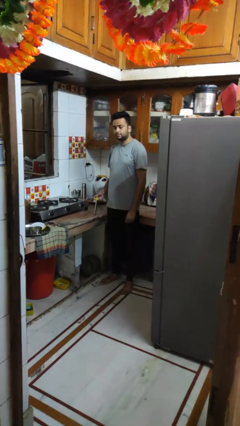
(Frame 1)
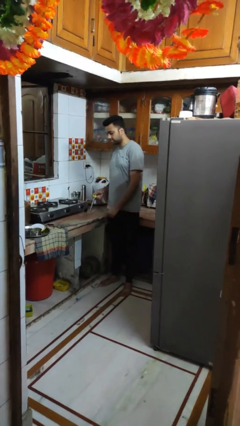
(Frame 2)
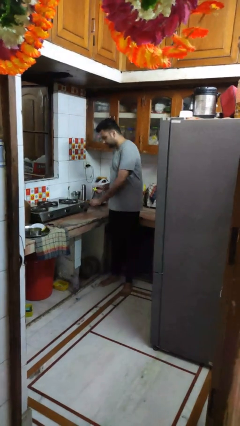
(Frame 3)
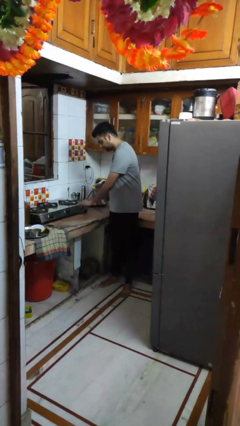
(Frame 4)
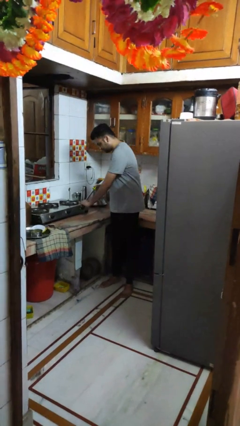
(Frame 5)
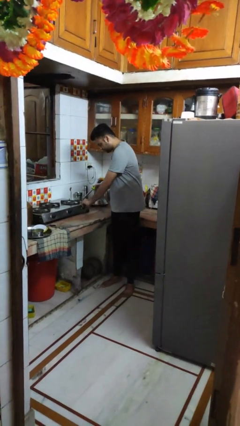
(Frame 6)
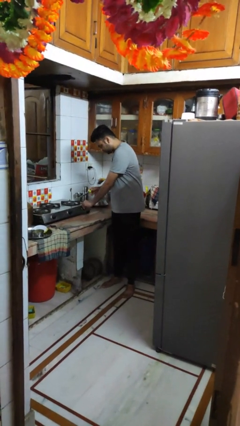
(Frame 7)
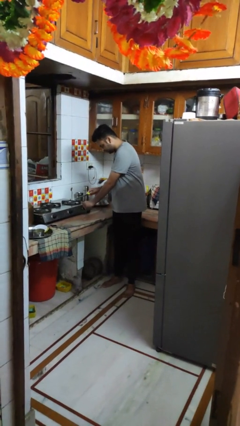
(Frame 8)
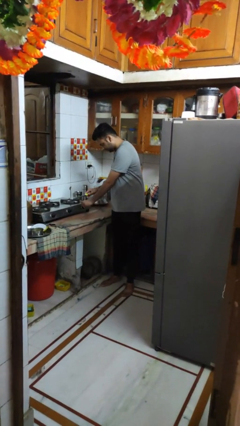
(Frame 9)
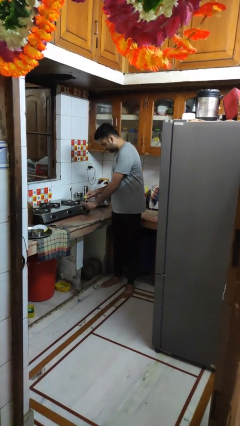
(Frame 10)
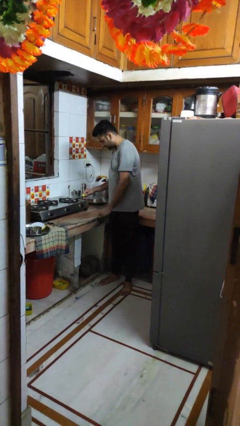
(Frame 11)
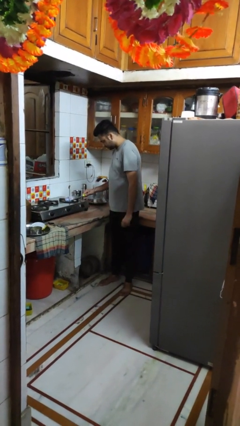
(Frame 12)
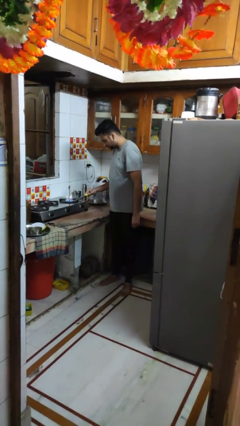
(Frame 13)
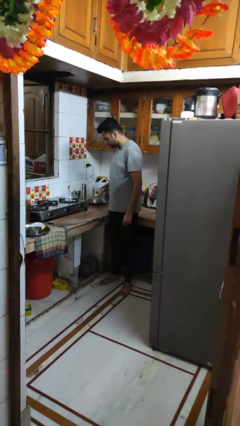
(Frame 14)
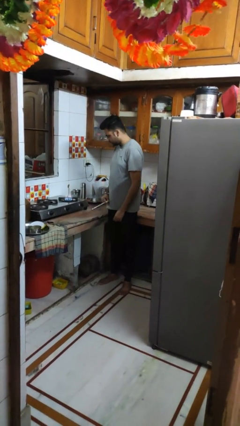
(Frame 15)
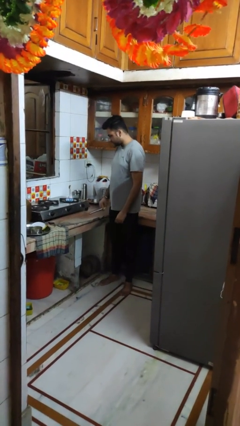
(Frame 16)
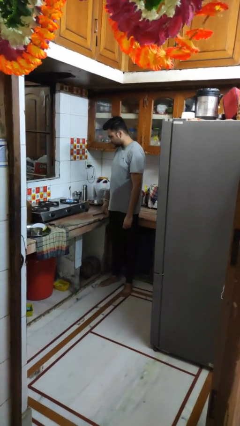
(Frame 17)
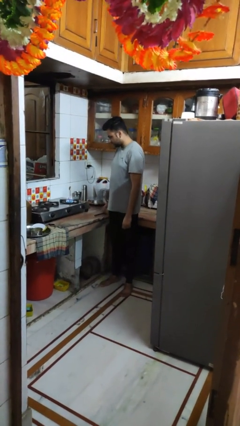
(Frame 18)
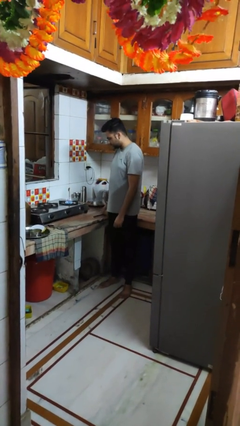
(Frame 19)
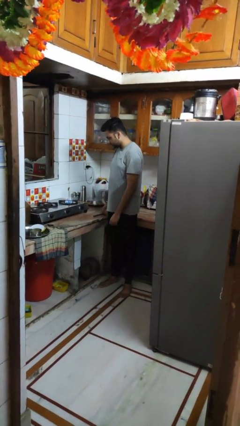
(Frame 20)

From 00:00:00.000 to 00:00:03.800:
person turns on stovetop

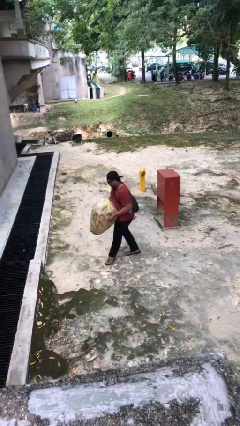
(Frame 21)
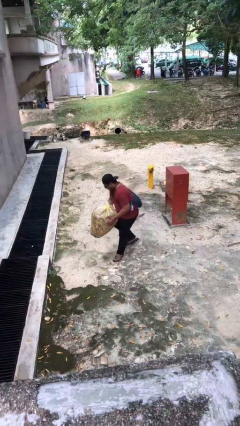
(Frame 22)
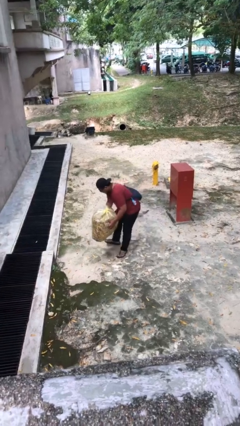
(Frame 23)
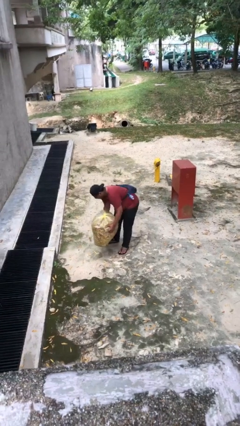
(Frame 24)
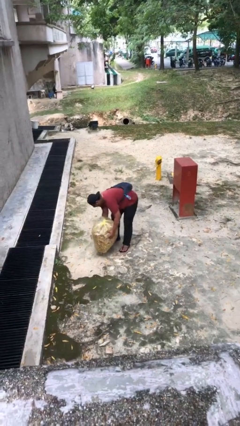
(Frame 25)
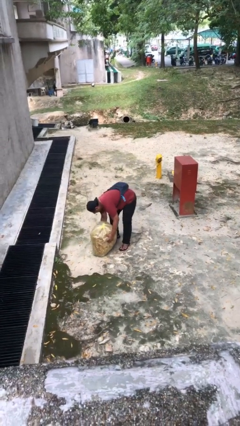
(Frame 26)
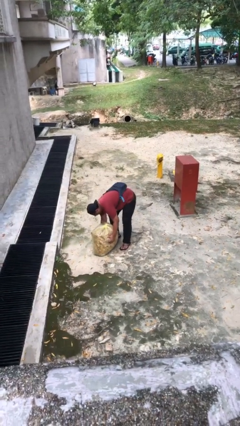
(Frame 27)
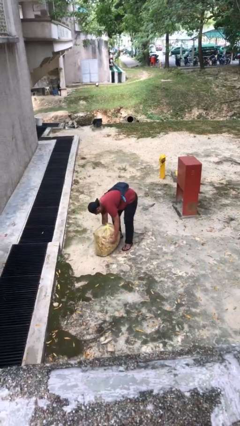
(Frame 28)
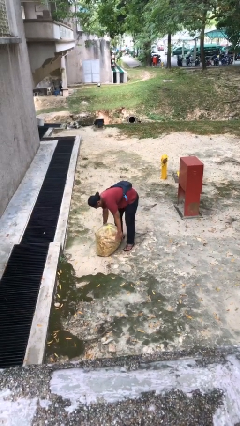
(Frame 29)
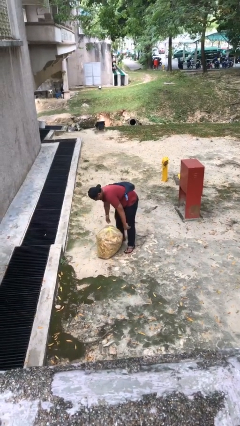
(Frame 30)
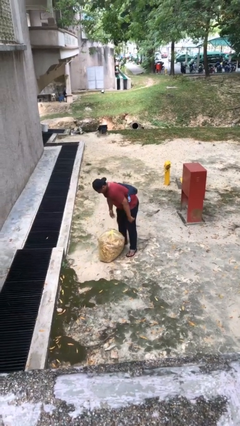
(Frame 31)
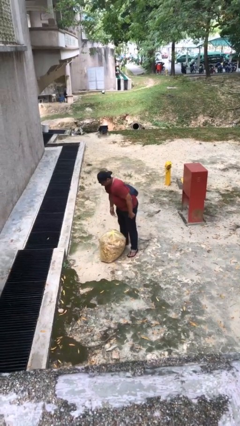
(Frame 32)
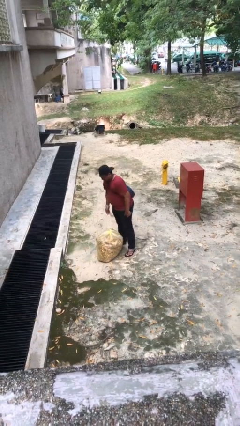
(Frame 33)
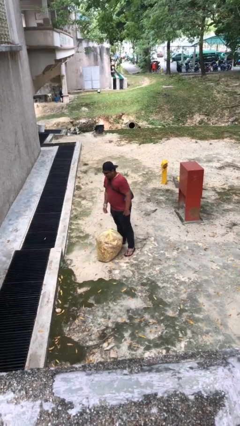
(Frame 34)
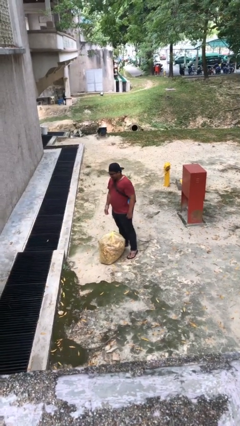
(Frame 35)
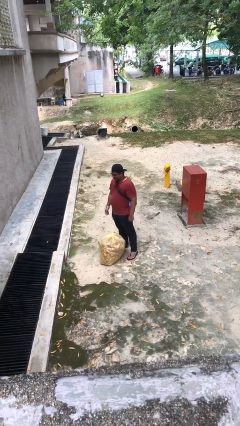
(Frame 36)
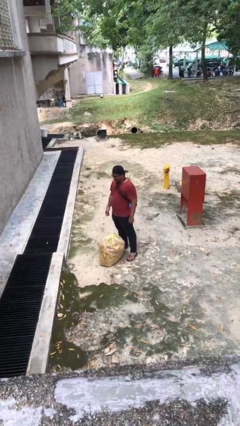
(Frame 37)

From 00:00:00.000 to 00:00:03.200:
person puts down object on floor

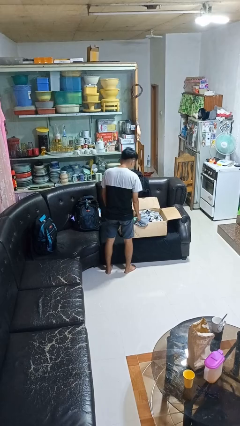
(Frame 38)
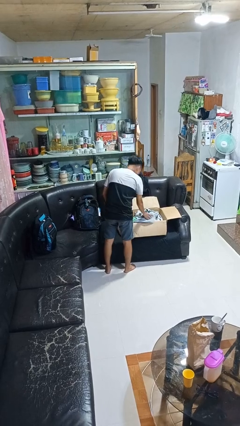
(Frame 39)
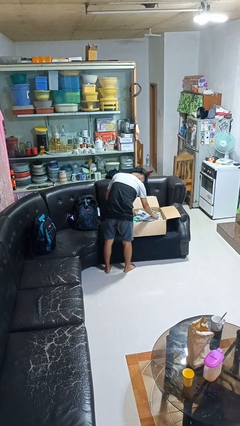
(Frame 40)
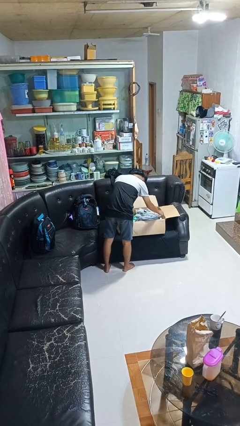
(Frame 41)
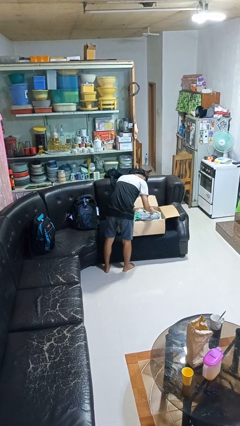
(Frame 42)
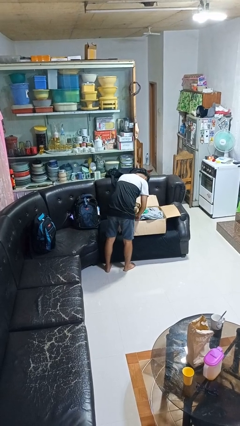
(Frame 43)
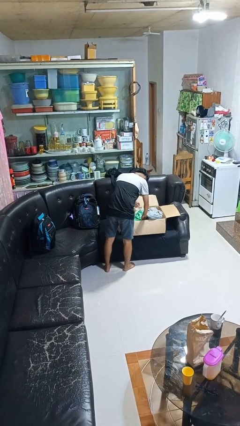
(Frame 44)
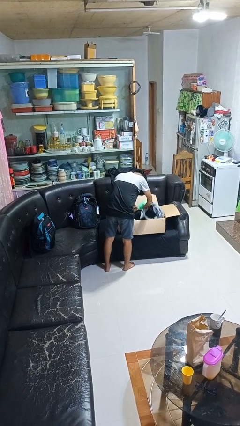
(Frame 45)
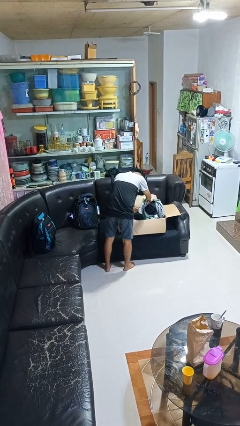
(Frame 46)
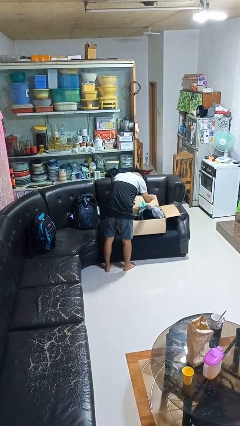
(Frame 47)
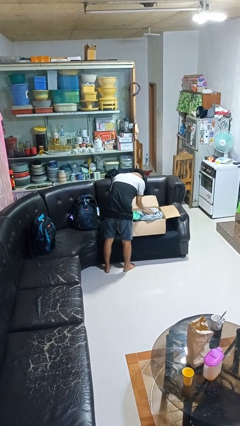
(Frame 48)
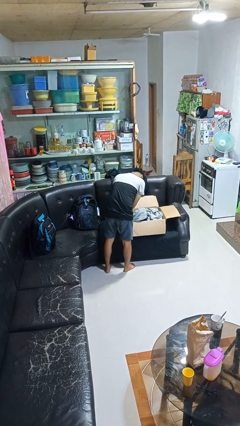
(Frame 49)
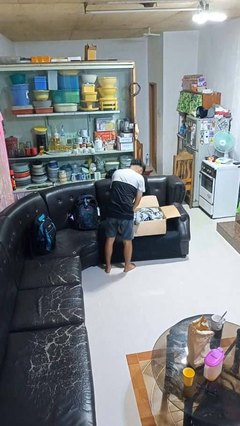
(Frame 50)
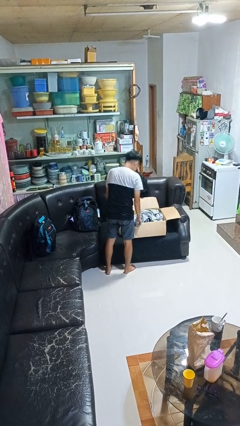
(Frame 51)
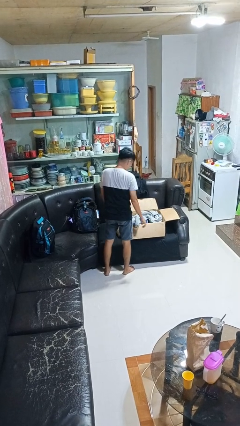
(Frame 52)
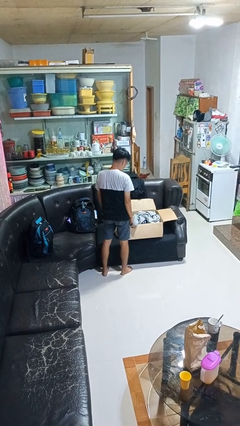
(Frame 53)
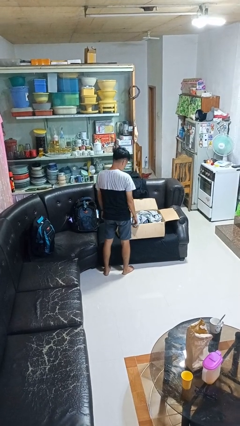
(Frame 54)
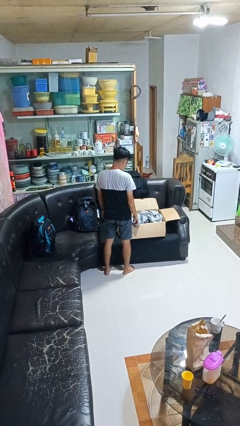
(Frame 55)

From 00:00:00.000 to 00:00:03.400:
person searches in box

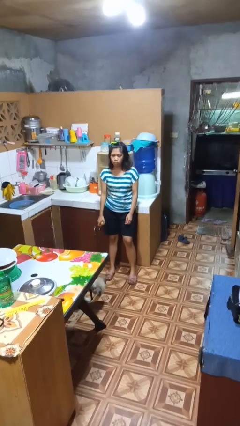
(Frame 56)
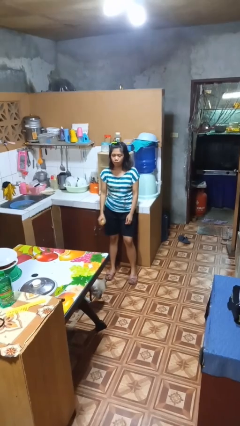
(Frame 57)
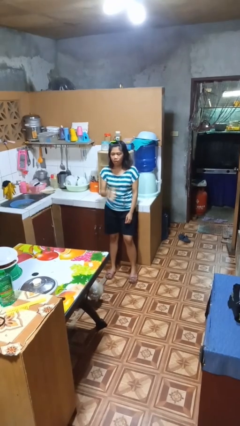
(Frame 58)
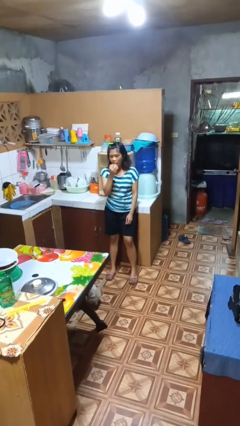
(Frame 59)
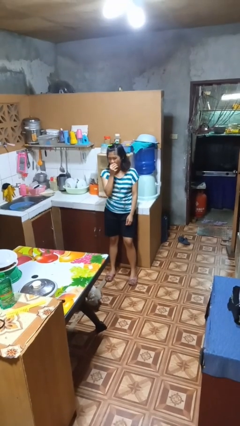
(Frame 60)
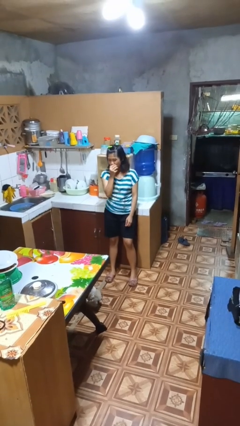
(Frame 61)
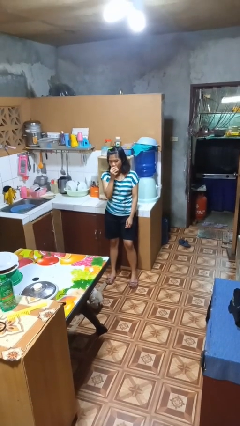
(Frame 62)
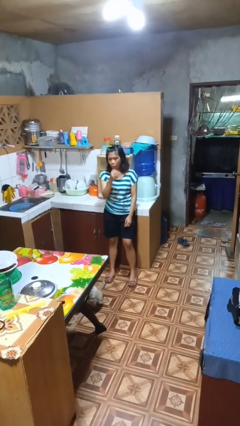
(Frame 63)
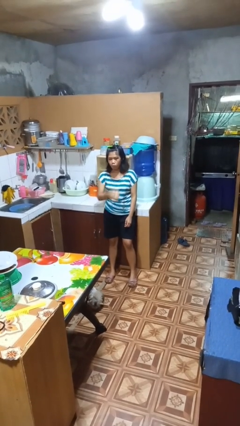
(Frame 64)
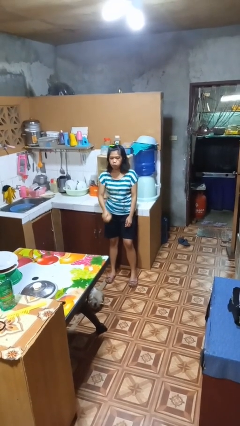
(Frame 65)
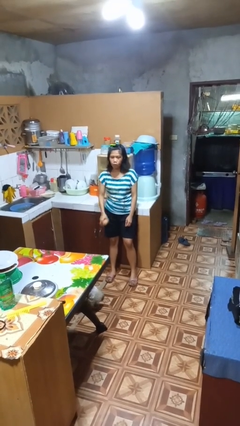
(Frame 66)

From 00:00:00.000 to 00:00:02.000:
person eats apple

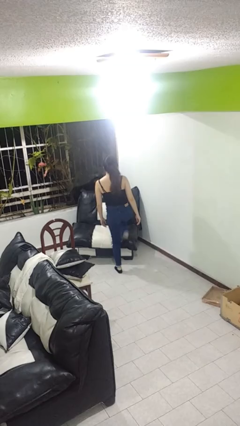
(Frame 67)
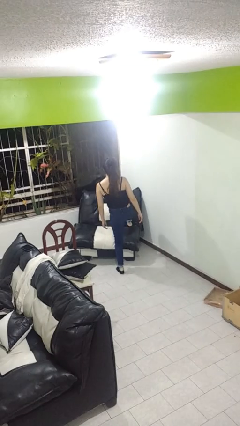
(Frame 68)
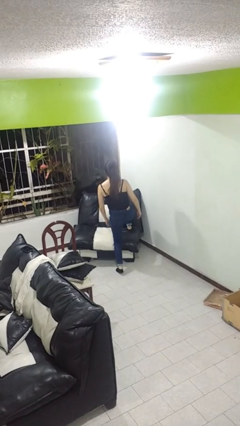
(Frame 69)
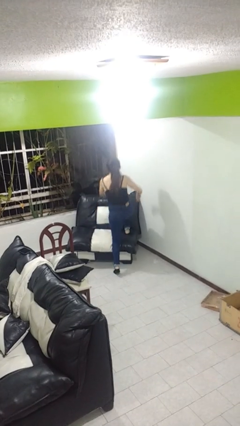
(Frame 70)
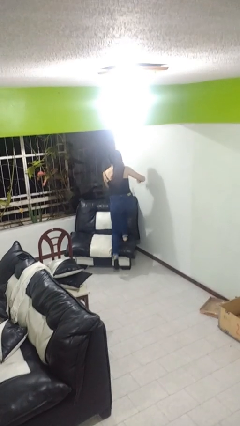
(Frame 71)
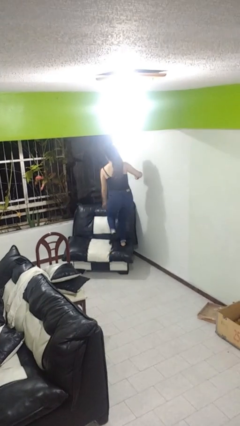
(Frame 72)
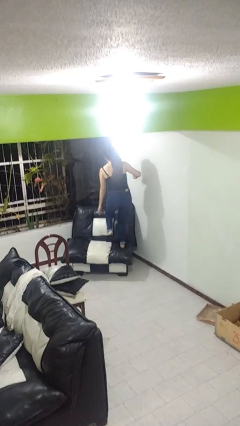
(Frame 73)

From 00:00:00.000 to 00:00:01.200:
person climbs on couch

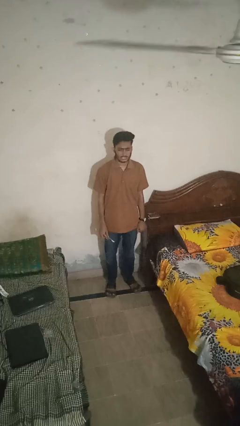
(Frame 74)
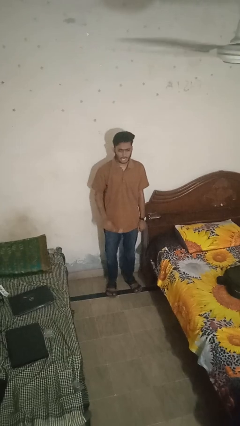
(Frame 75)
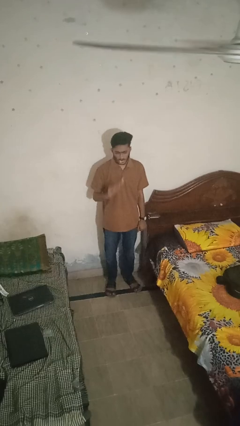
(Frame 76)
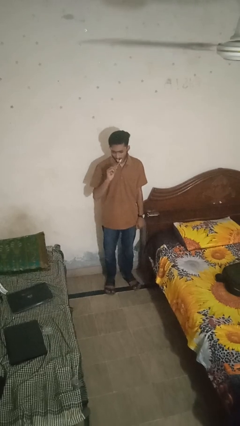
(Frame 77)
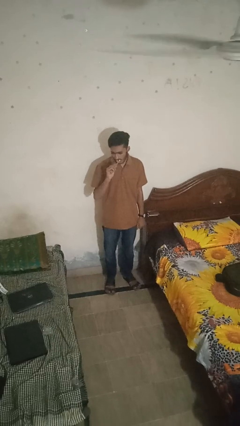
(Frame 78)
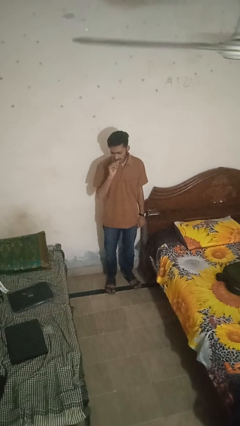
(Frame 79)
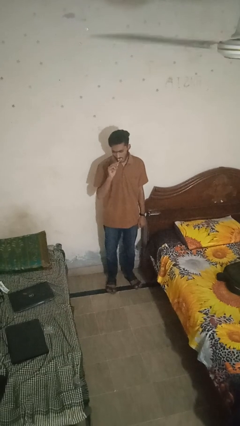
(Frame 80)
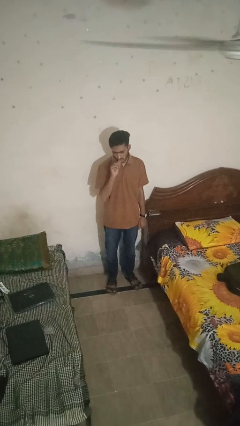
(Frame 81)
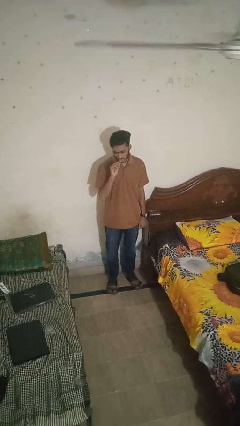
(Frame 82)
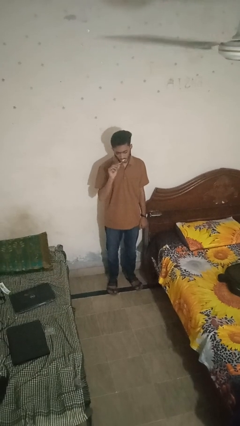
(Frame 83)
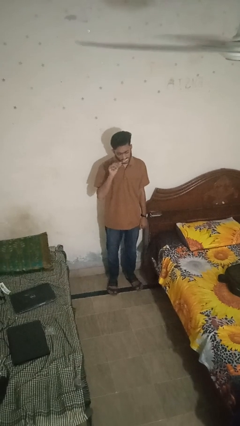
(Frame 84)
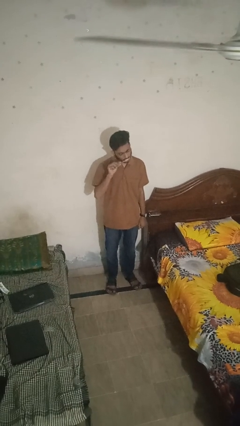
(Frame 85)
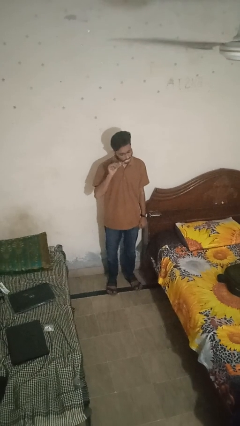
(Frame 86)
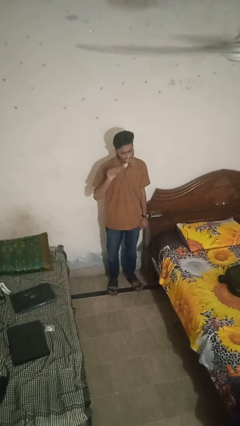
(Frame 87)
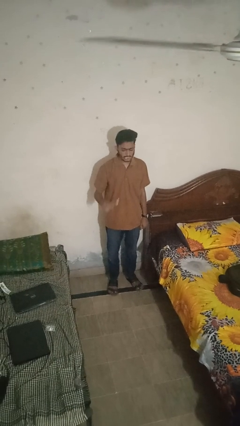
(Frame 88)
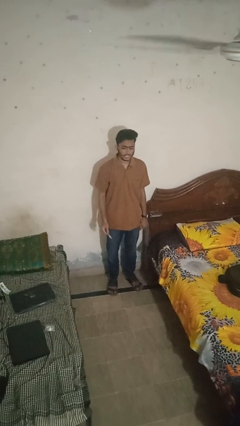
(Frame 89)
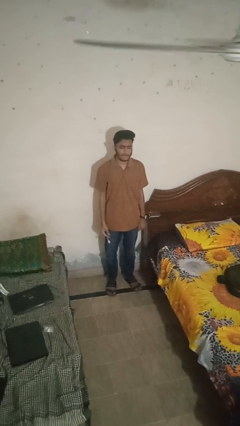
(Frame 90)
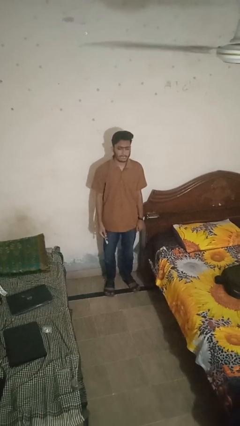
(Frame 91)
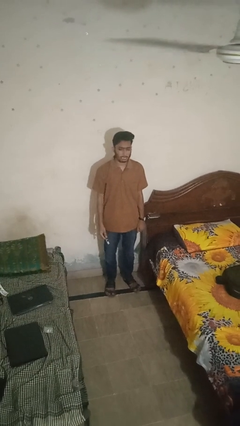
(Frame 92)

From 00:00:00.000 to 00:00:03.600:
person brushes teeth

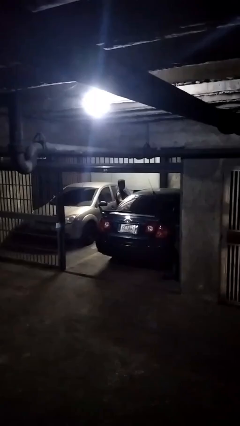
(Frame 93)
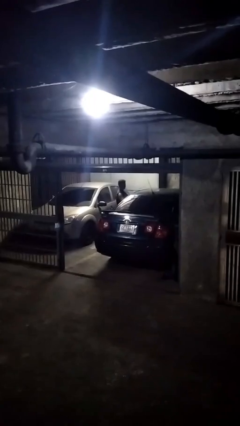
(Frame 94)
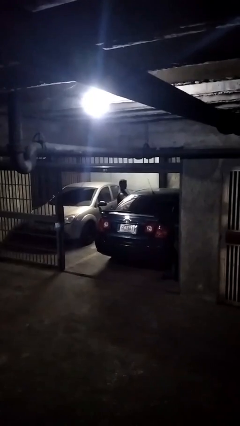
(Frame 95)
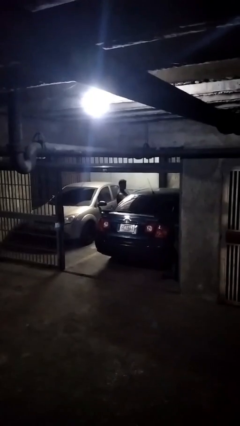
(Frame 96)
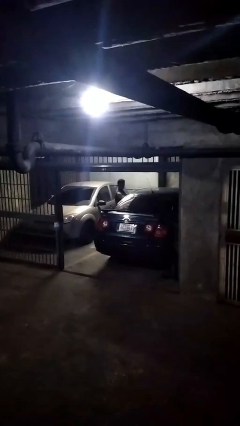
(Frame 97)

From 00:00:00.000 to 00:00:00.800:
person closes car door
